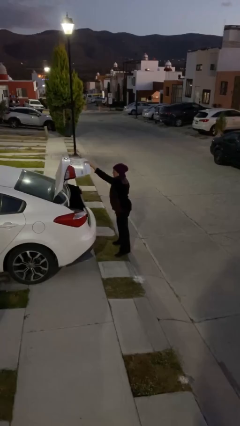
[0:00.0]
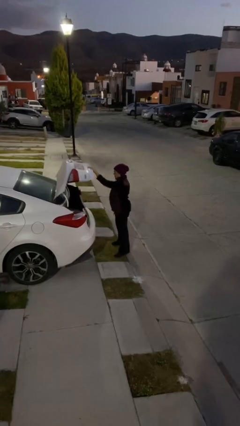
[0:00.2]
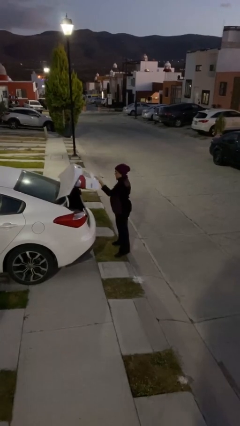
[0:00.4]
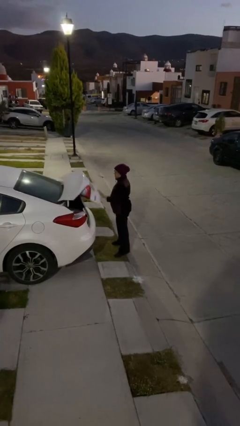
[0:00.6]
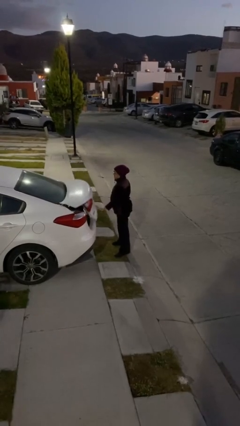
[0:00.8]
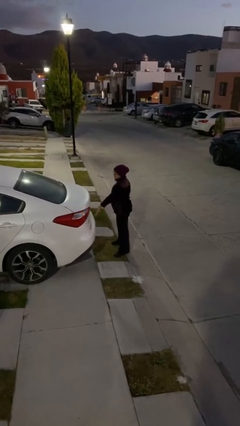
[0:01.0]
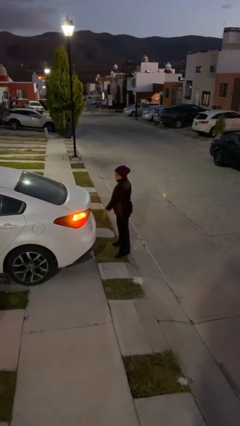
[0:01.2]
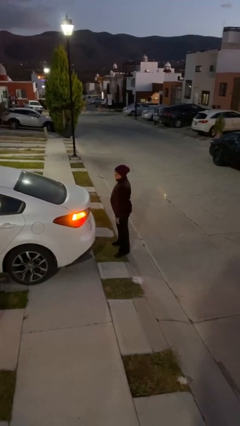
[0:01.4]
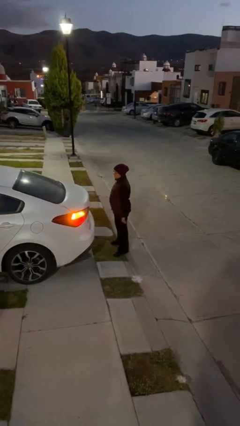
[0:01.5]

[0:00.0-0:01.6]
person closes car trunk

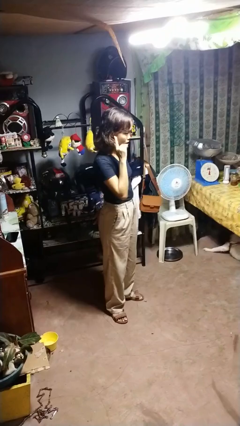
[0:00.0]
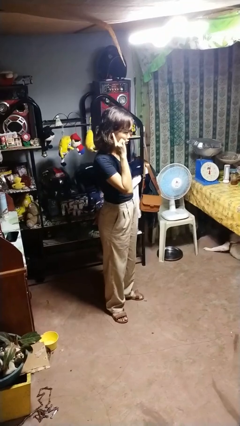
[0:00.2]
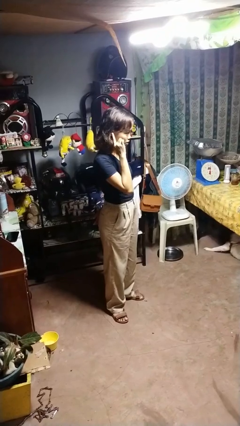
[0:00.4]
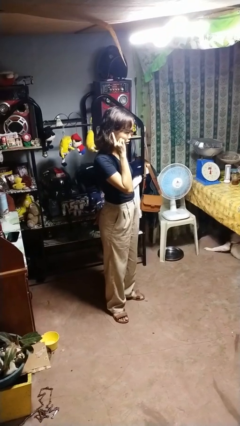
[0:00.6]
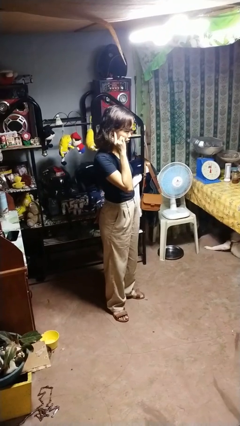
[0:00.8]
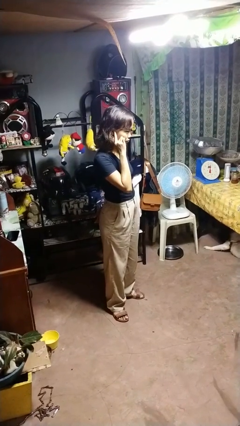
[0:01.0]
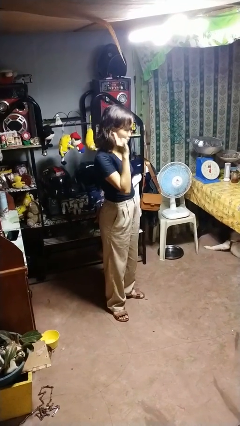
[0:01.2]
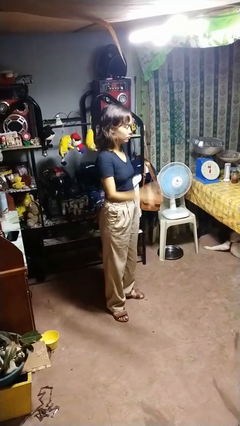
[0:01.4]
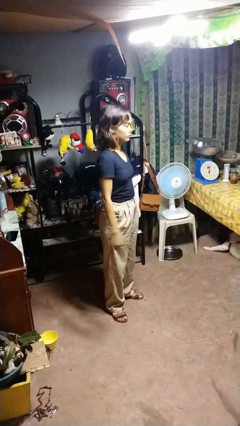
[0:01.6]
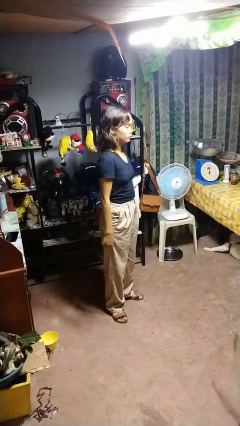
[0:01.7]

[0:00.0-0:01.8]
person gestures listen closely

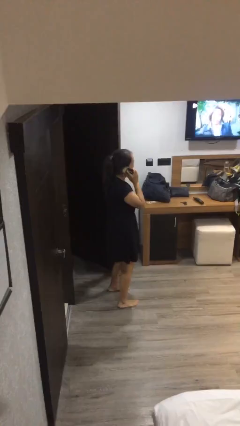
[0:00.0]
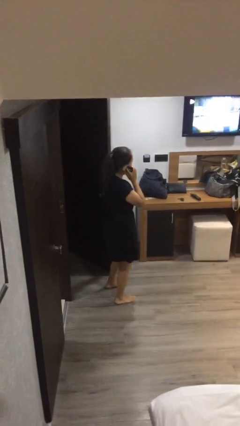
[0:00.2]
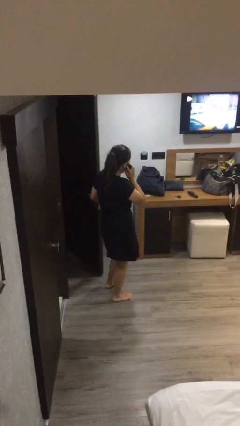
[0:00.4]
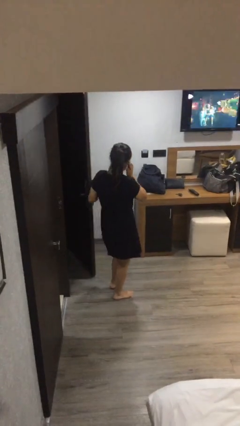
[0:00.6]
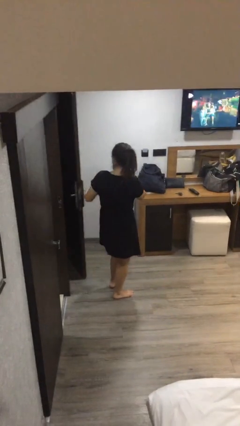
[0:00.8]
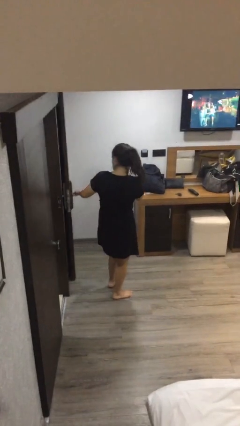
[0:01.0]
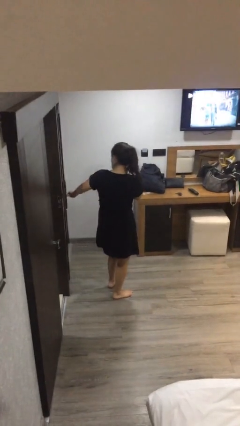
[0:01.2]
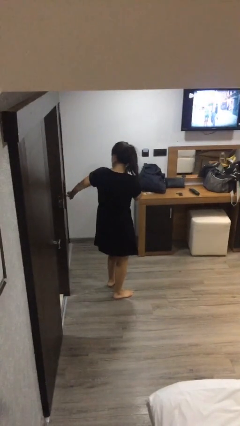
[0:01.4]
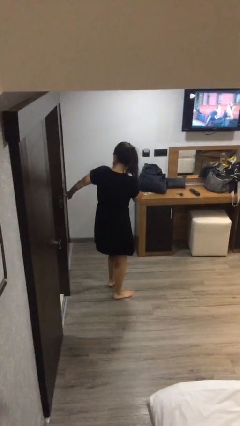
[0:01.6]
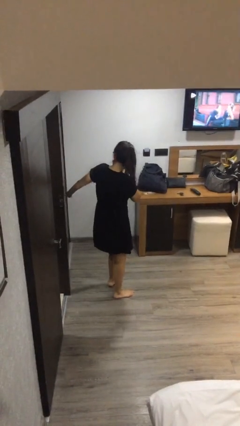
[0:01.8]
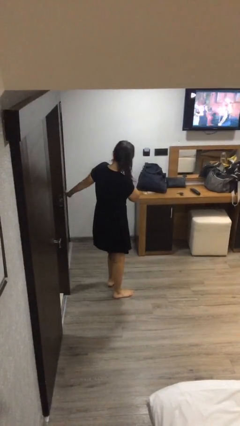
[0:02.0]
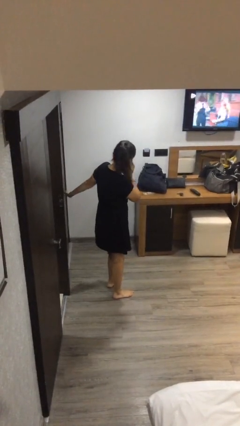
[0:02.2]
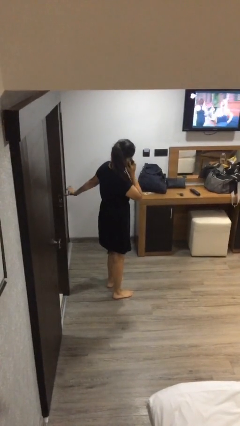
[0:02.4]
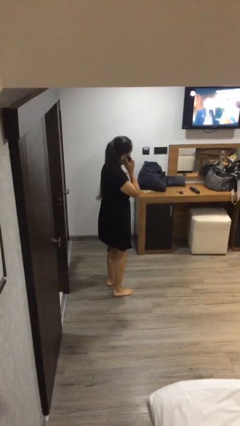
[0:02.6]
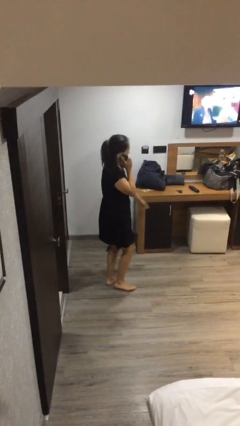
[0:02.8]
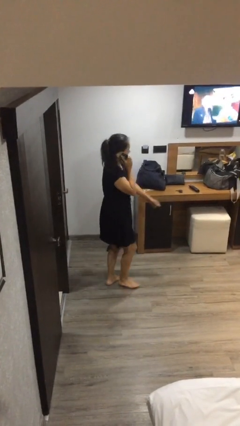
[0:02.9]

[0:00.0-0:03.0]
person closes facility door

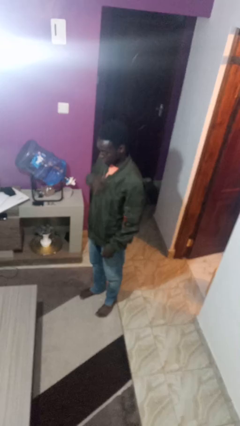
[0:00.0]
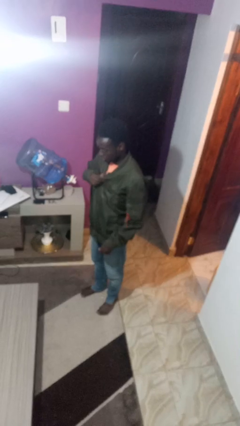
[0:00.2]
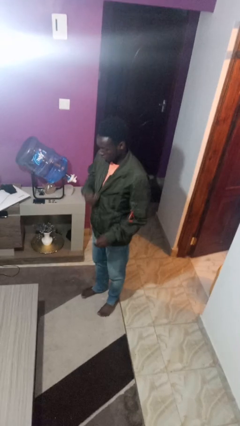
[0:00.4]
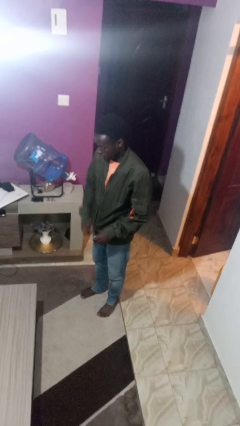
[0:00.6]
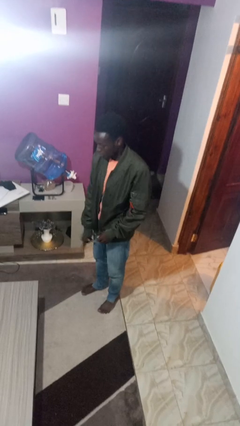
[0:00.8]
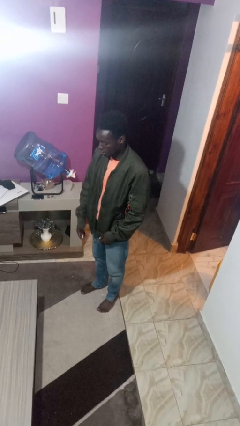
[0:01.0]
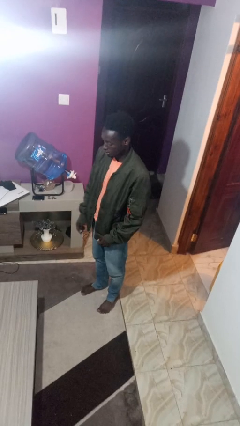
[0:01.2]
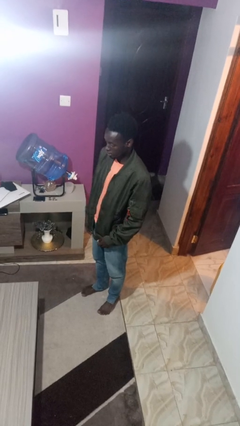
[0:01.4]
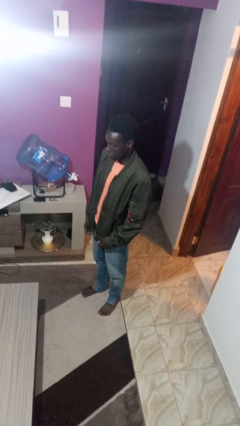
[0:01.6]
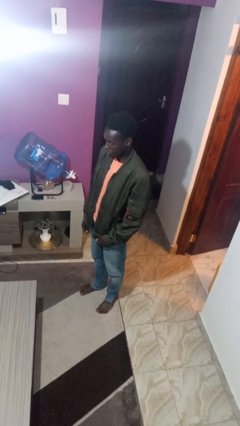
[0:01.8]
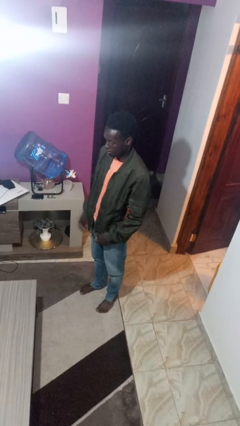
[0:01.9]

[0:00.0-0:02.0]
person unzips jacket

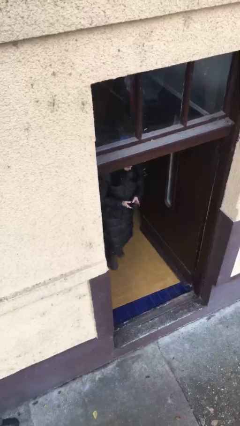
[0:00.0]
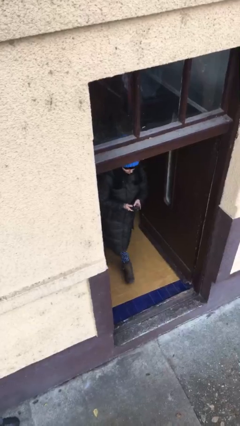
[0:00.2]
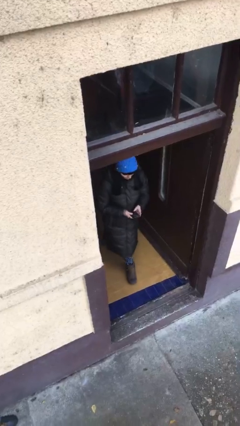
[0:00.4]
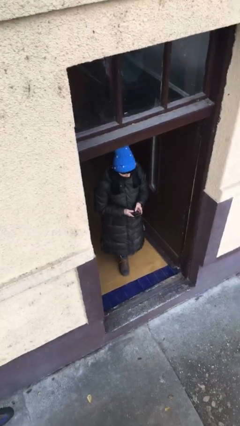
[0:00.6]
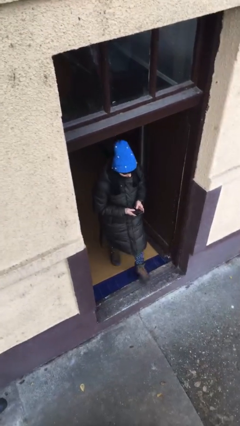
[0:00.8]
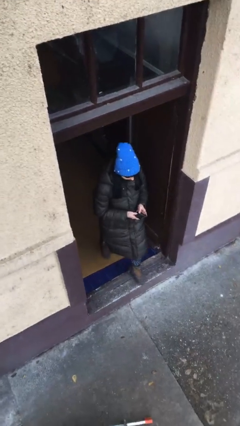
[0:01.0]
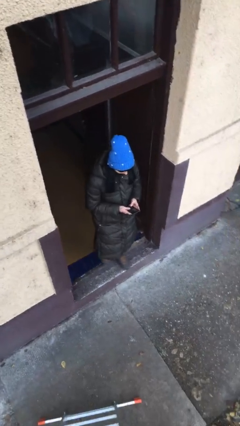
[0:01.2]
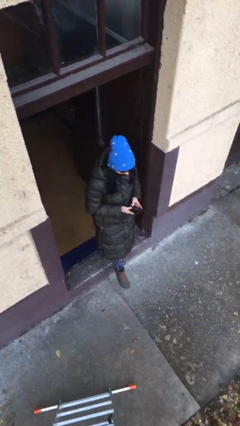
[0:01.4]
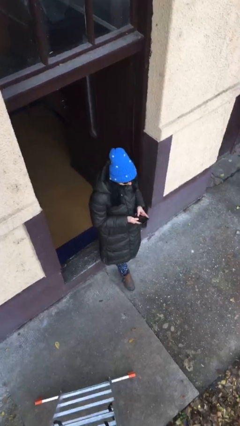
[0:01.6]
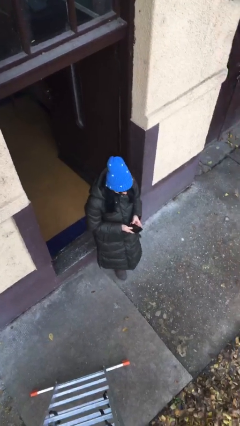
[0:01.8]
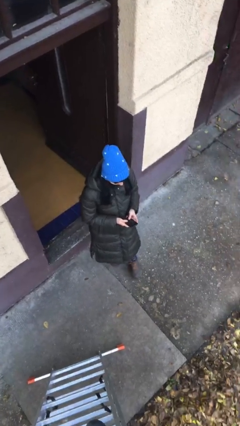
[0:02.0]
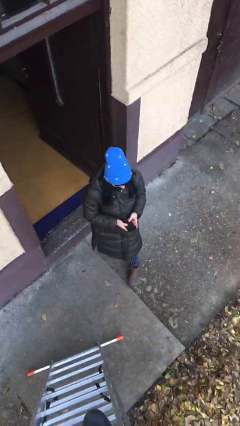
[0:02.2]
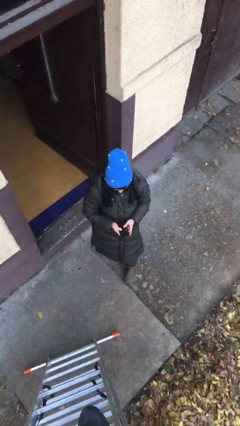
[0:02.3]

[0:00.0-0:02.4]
person enters scene through structure

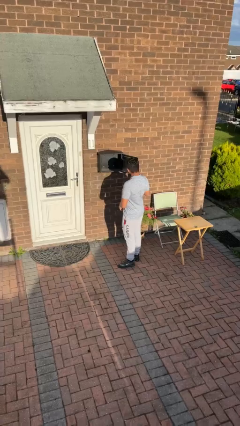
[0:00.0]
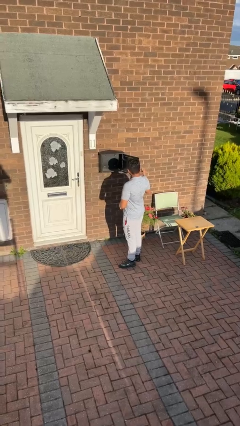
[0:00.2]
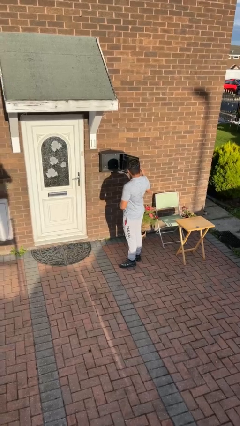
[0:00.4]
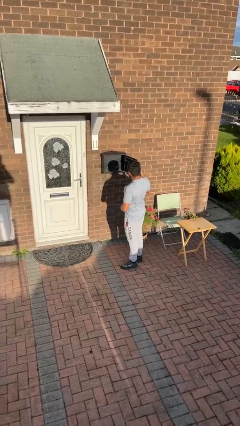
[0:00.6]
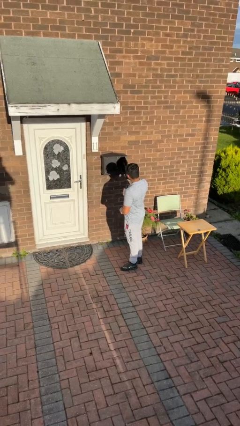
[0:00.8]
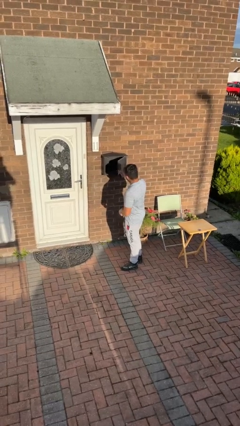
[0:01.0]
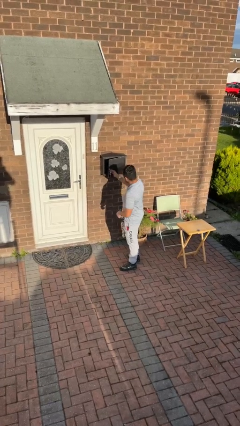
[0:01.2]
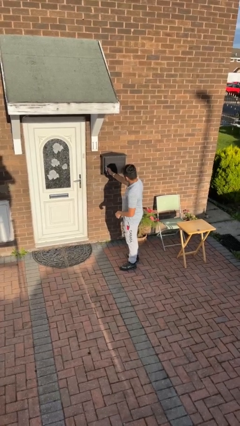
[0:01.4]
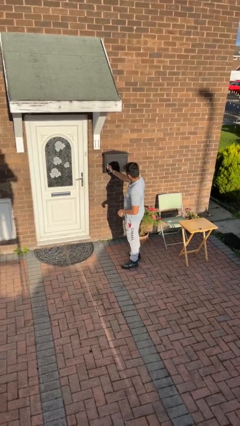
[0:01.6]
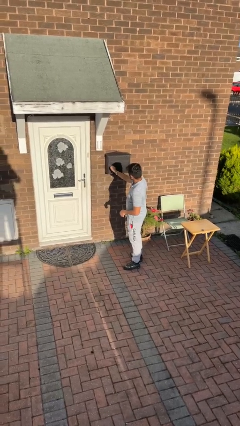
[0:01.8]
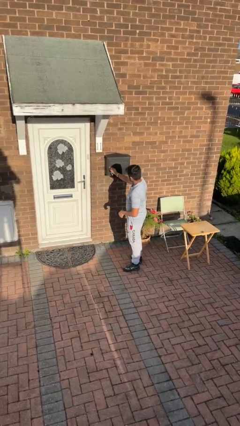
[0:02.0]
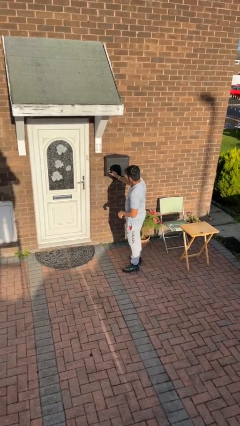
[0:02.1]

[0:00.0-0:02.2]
person closes mailbox

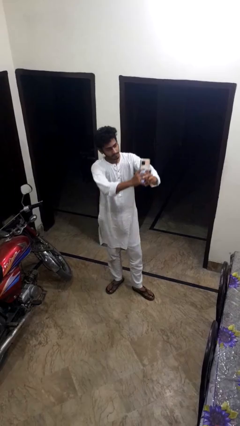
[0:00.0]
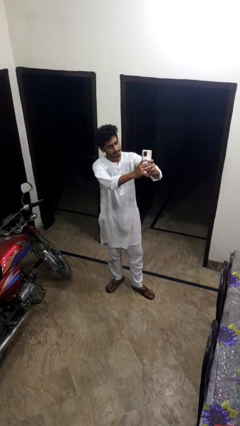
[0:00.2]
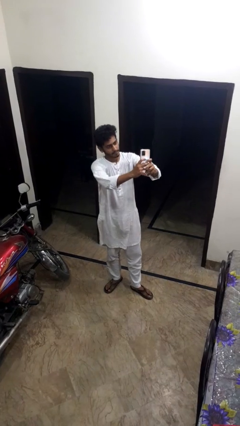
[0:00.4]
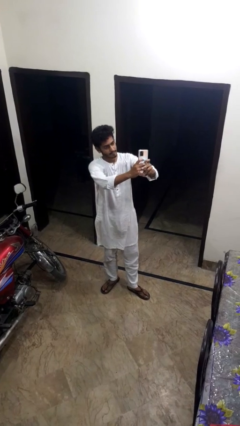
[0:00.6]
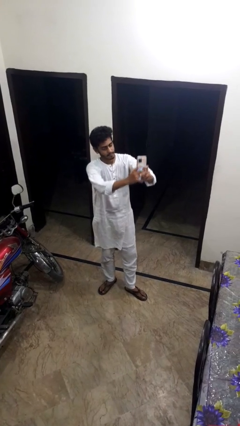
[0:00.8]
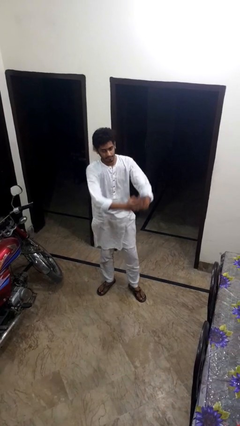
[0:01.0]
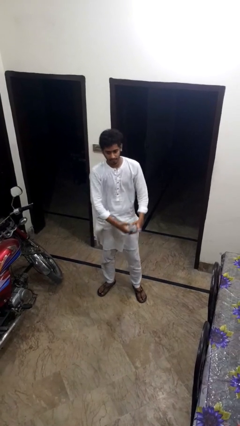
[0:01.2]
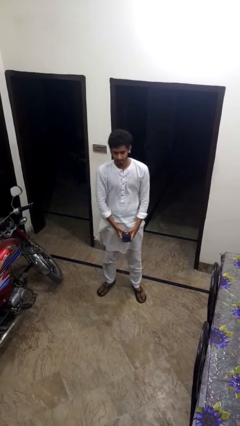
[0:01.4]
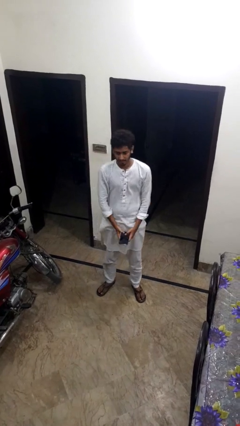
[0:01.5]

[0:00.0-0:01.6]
person takes selfie

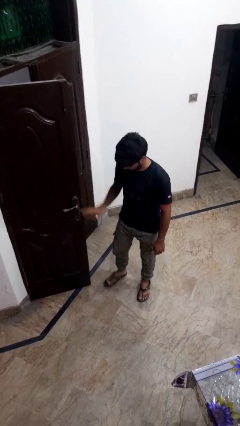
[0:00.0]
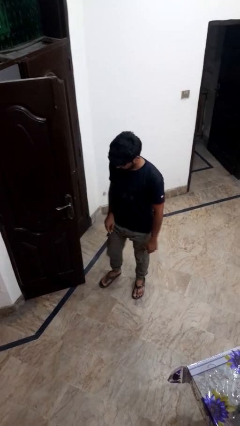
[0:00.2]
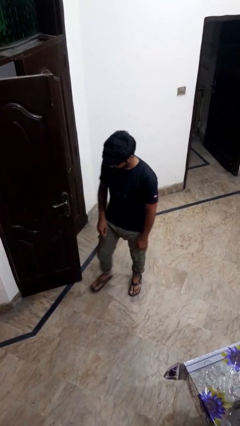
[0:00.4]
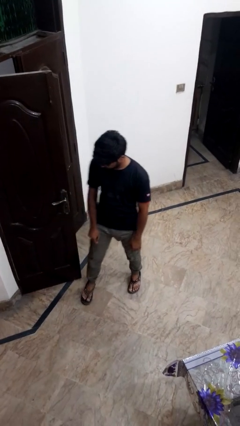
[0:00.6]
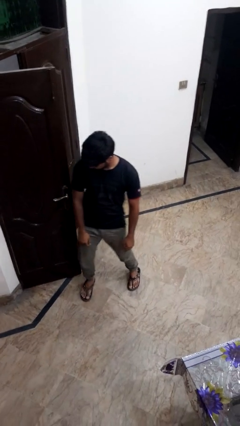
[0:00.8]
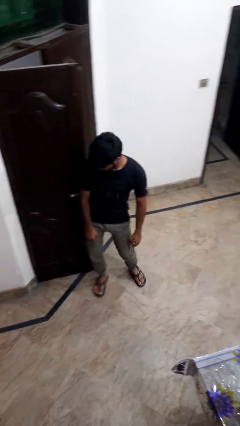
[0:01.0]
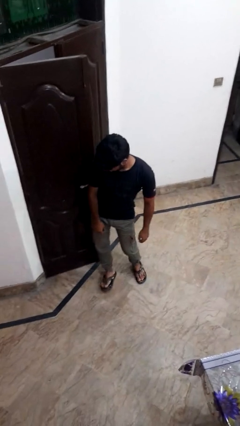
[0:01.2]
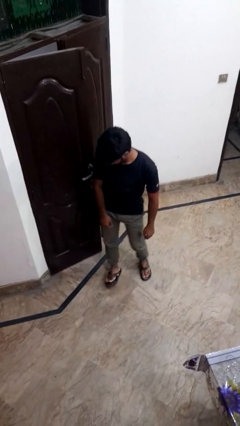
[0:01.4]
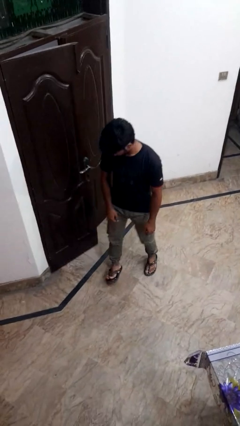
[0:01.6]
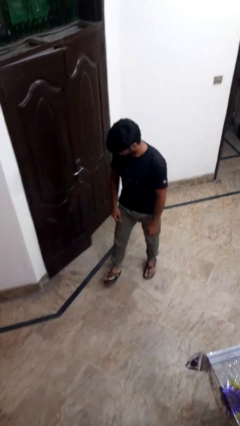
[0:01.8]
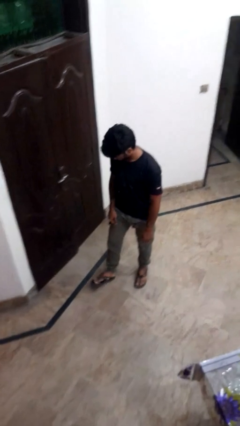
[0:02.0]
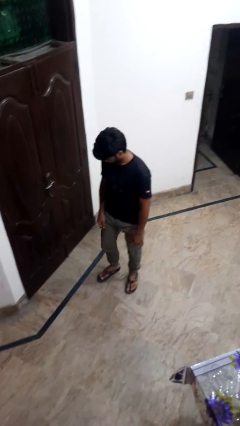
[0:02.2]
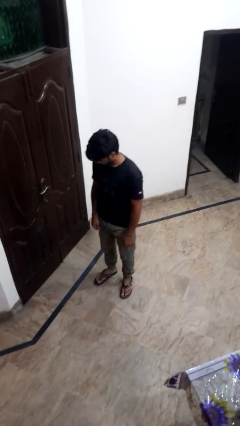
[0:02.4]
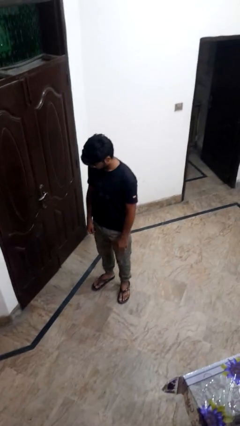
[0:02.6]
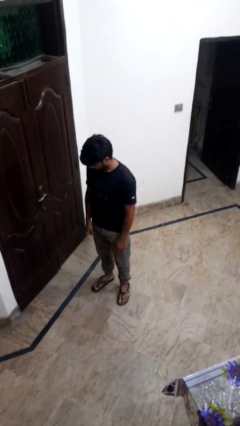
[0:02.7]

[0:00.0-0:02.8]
person closes door with hip
